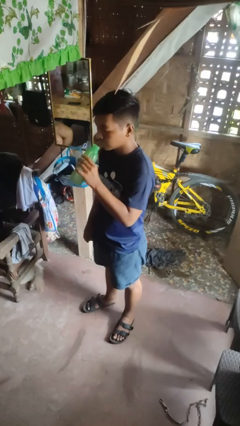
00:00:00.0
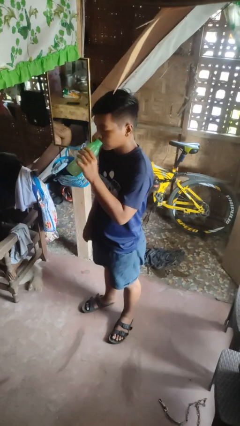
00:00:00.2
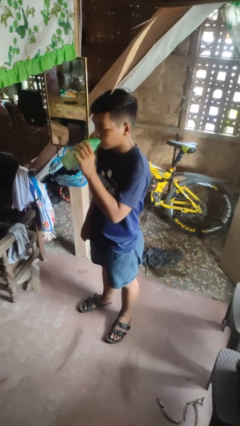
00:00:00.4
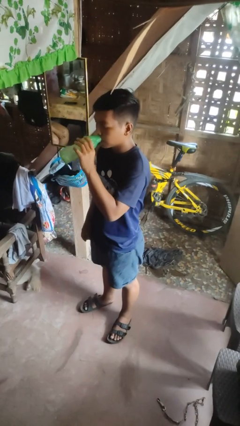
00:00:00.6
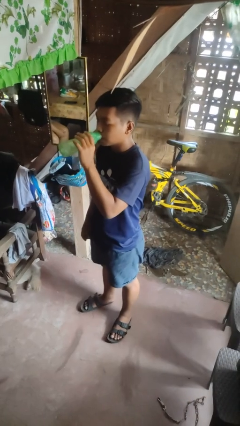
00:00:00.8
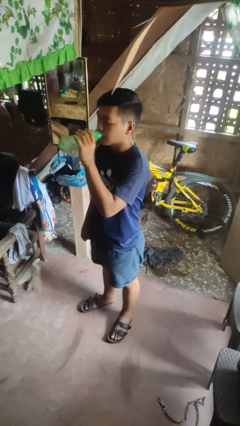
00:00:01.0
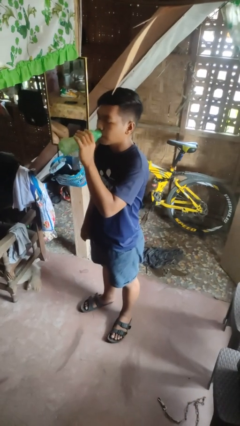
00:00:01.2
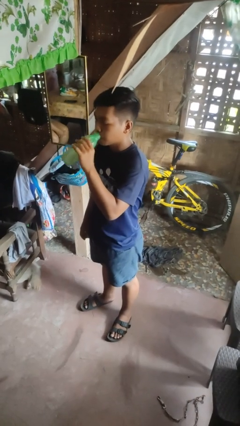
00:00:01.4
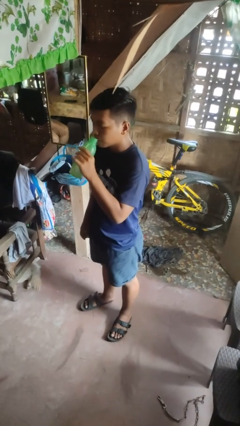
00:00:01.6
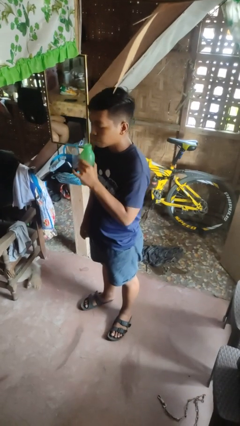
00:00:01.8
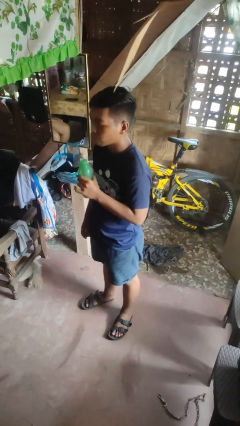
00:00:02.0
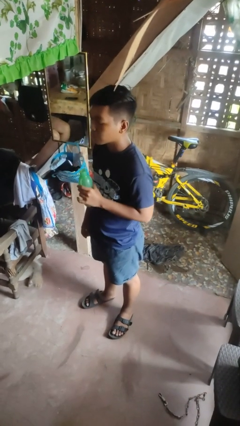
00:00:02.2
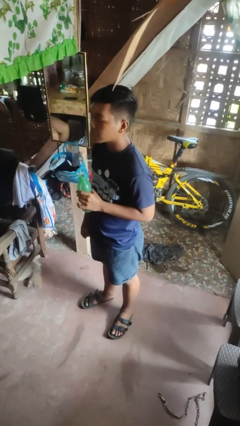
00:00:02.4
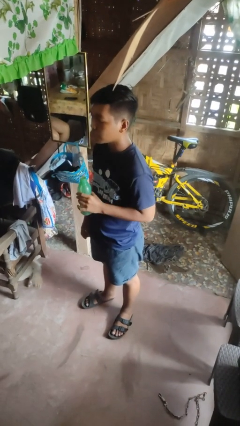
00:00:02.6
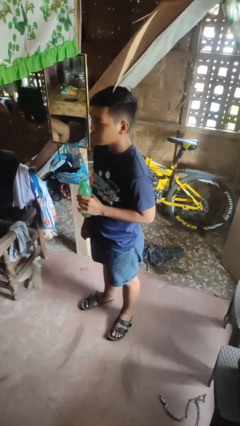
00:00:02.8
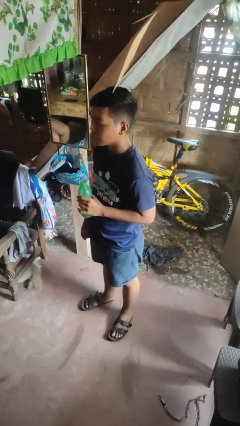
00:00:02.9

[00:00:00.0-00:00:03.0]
person drinks from bottle

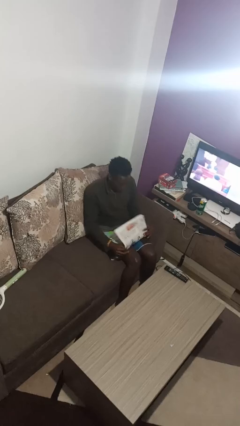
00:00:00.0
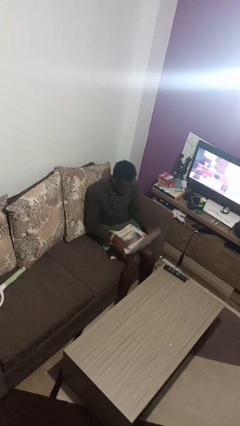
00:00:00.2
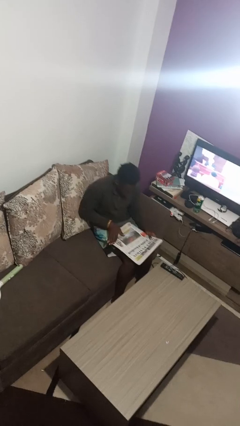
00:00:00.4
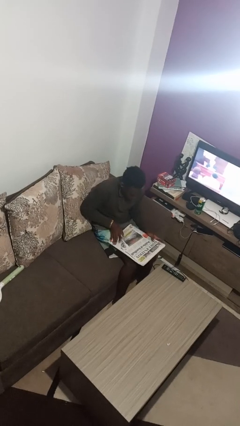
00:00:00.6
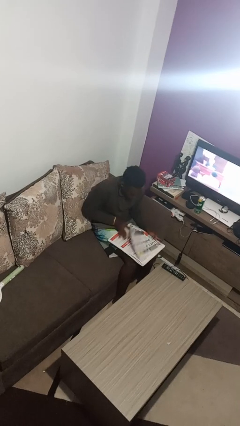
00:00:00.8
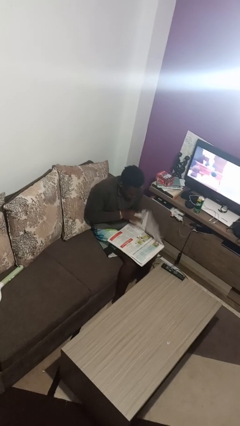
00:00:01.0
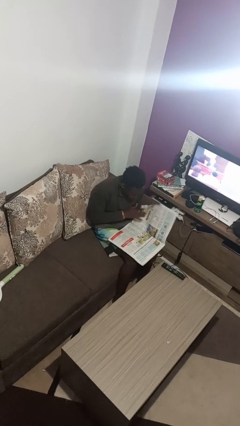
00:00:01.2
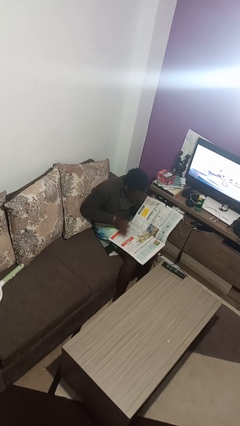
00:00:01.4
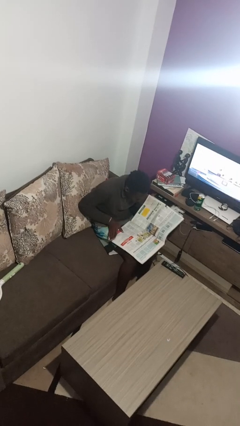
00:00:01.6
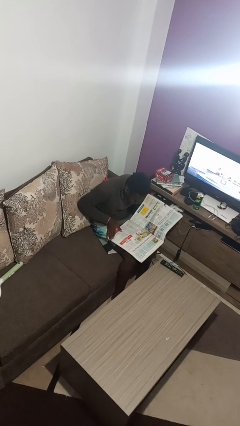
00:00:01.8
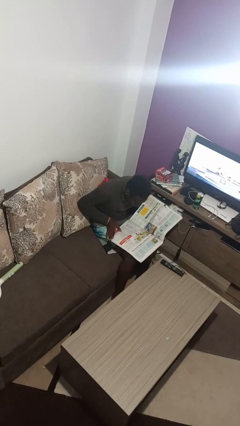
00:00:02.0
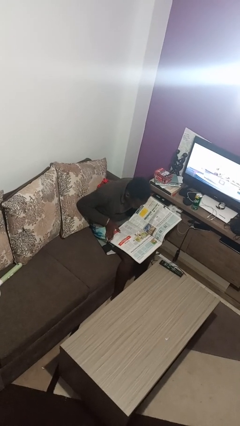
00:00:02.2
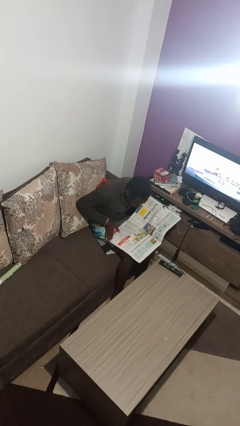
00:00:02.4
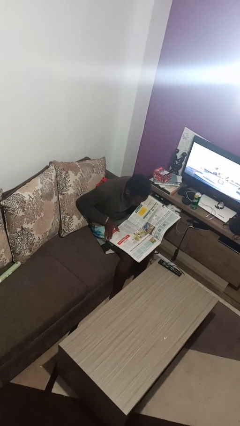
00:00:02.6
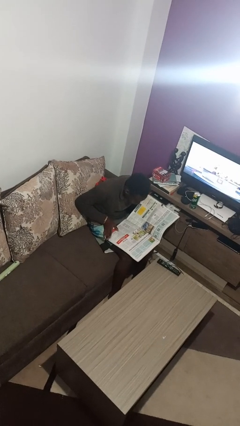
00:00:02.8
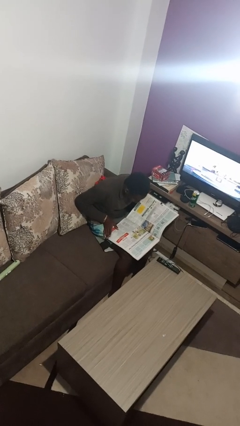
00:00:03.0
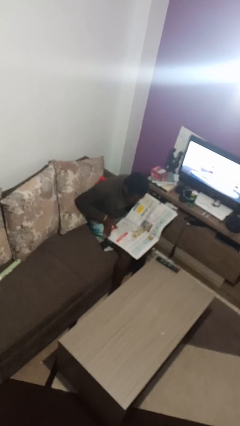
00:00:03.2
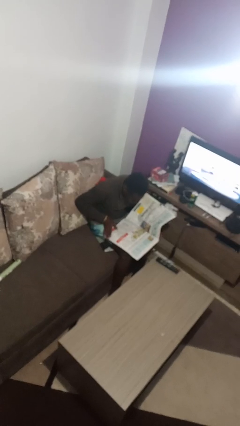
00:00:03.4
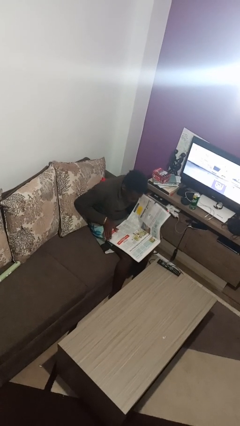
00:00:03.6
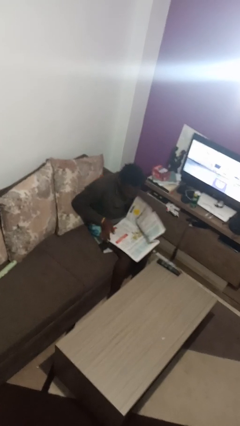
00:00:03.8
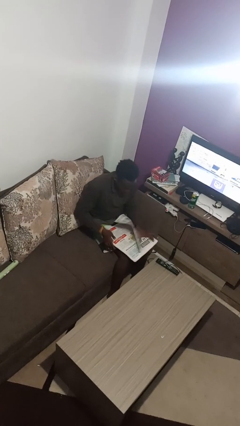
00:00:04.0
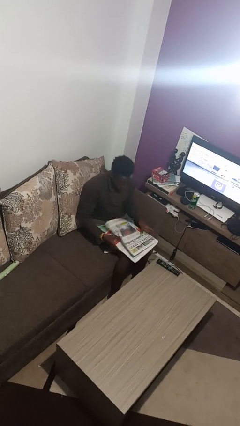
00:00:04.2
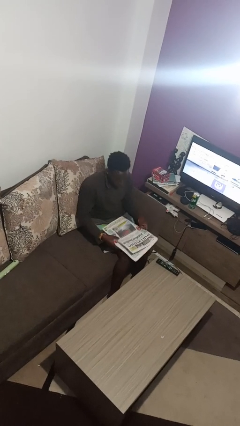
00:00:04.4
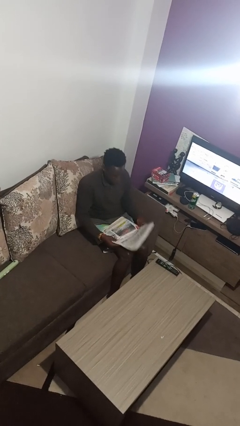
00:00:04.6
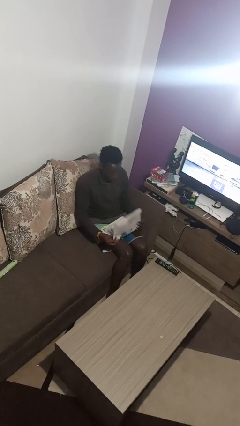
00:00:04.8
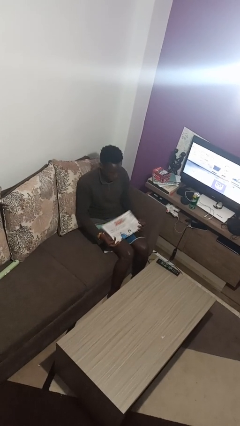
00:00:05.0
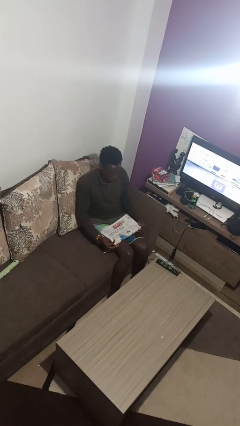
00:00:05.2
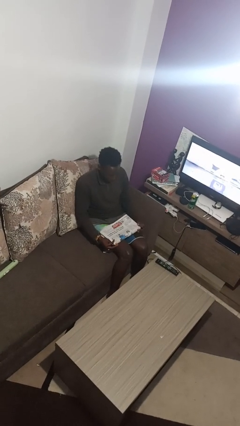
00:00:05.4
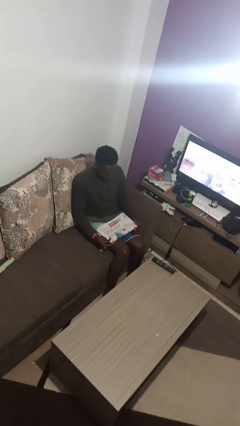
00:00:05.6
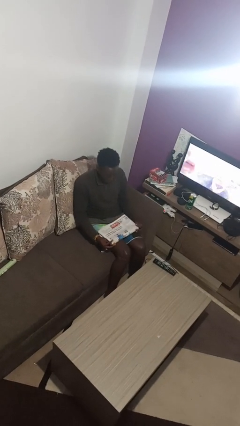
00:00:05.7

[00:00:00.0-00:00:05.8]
person reads newspaper

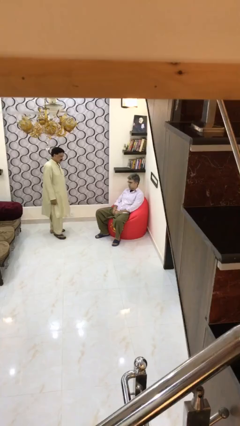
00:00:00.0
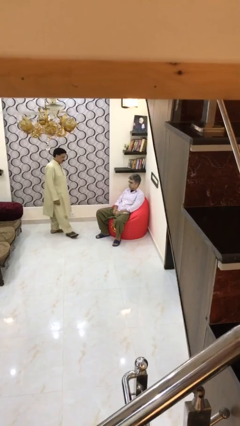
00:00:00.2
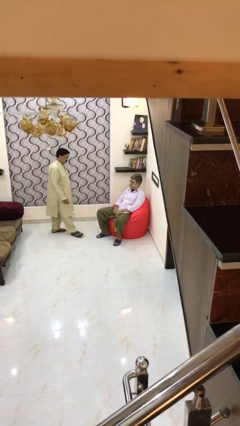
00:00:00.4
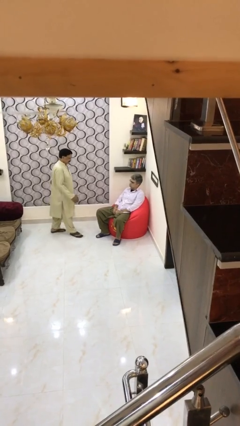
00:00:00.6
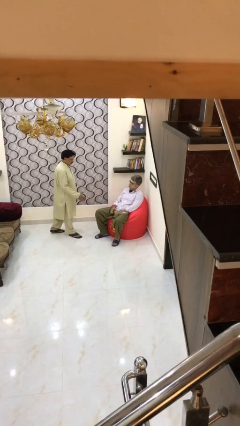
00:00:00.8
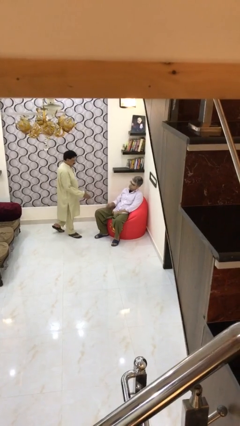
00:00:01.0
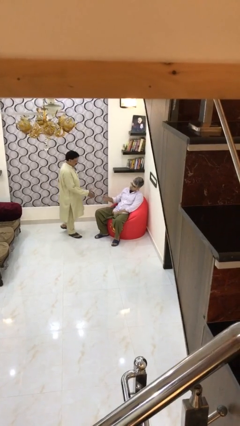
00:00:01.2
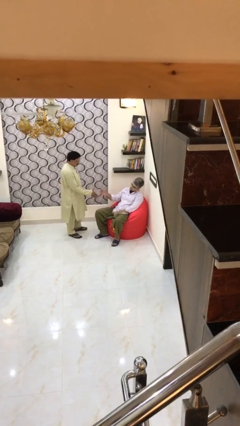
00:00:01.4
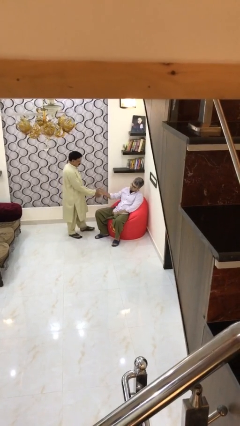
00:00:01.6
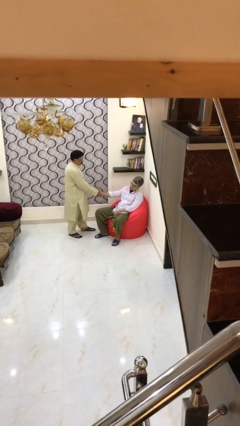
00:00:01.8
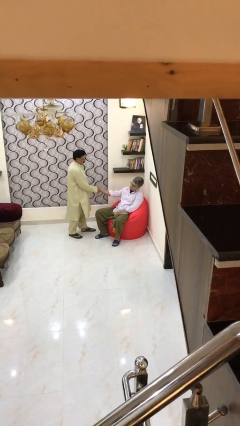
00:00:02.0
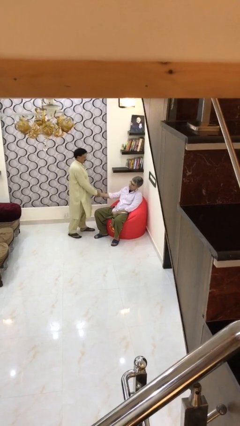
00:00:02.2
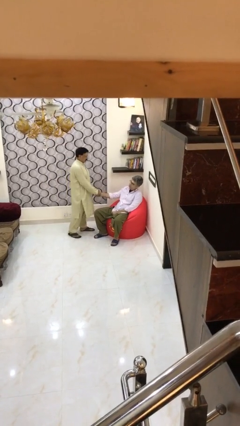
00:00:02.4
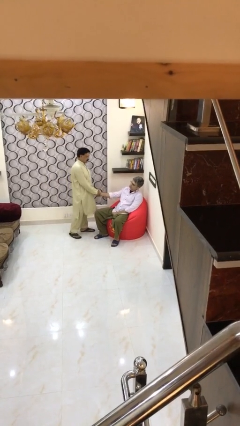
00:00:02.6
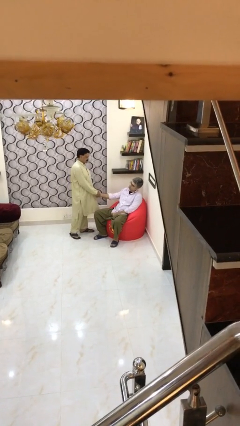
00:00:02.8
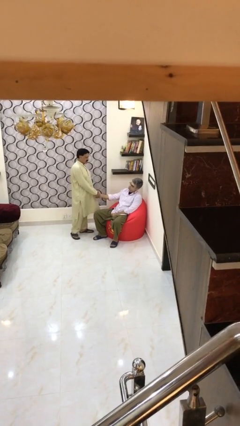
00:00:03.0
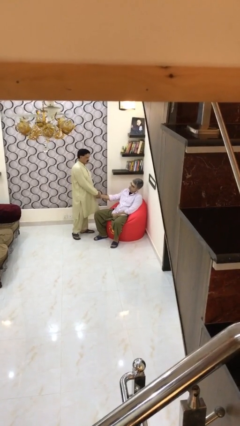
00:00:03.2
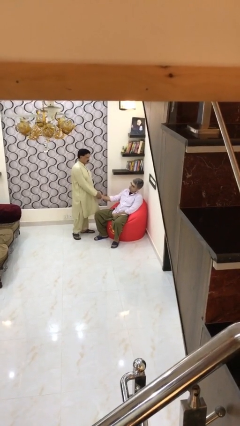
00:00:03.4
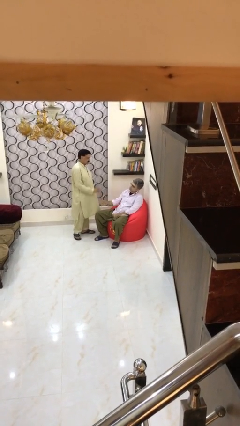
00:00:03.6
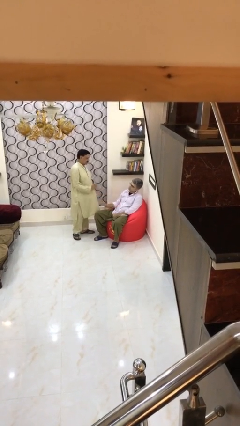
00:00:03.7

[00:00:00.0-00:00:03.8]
person shakes hand

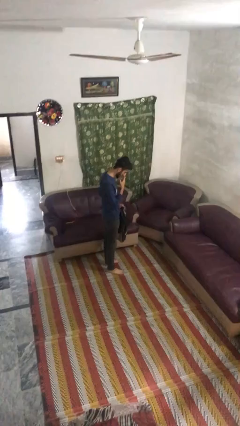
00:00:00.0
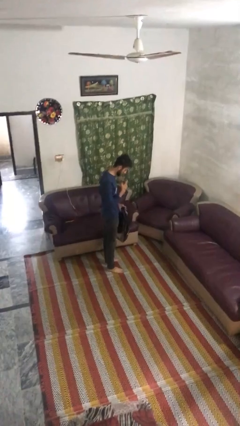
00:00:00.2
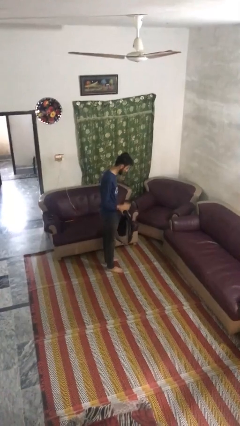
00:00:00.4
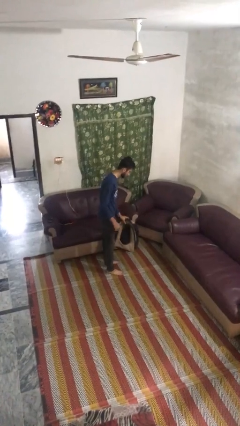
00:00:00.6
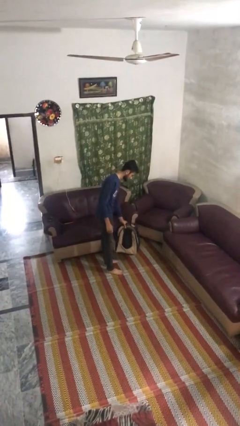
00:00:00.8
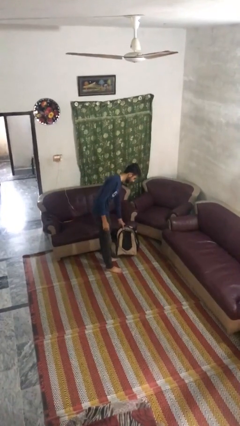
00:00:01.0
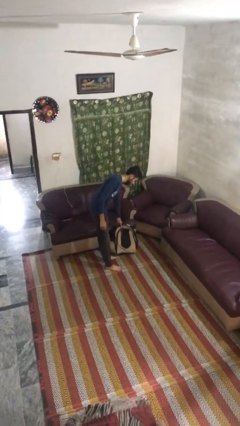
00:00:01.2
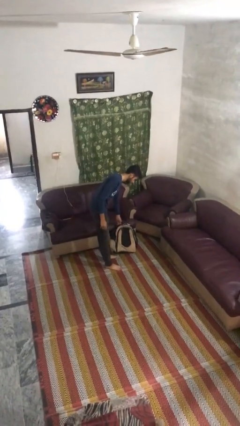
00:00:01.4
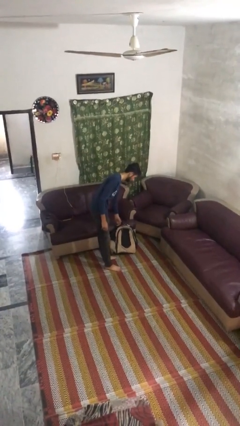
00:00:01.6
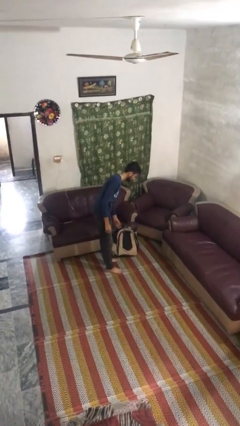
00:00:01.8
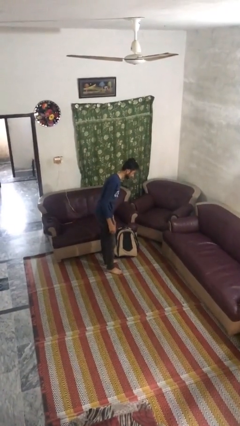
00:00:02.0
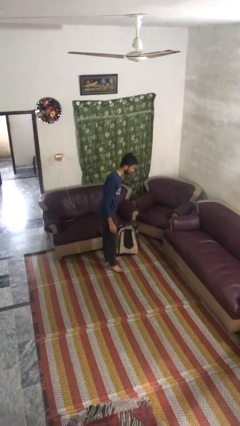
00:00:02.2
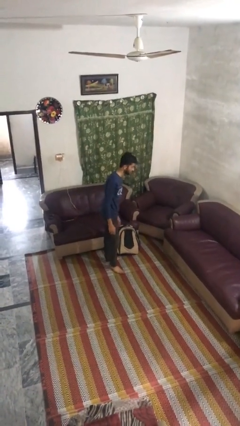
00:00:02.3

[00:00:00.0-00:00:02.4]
person puts down object on floor

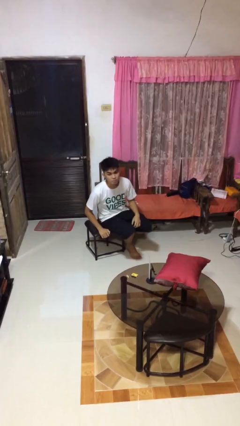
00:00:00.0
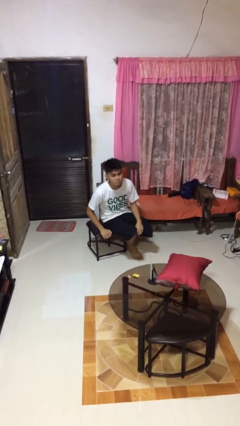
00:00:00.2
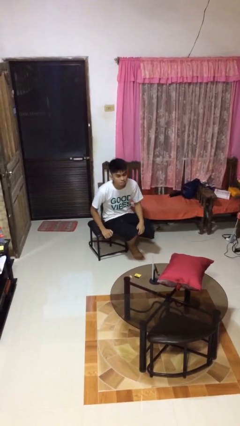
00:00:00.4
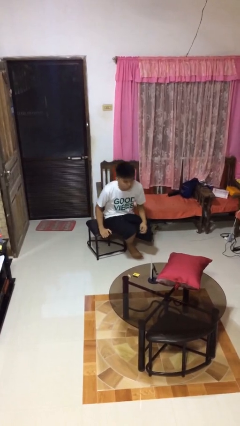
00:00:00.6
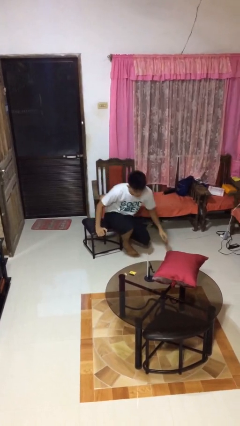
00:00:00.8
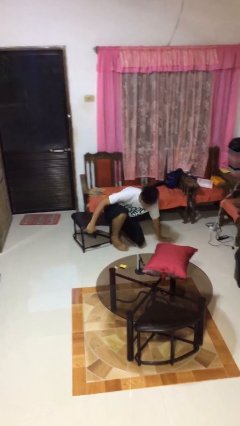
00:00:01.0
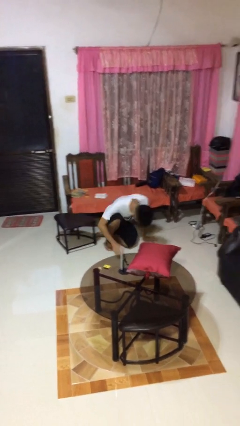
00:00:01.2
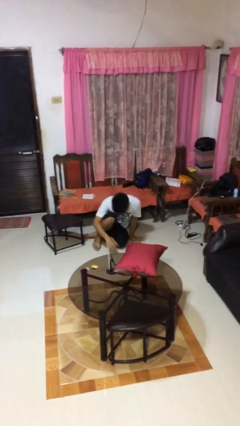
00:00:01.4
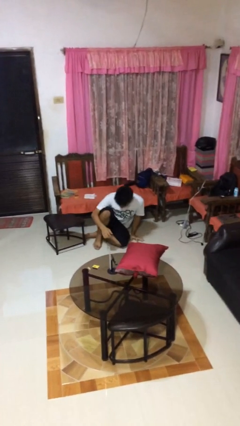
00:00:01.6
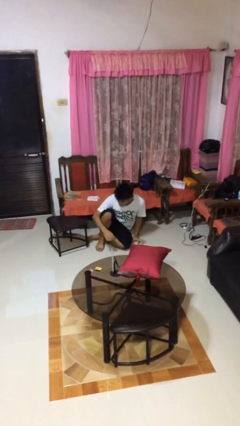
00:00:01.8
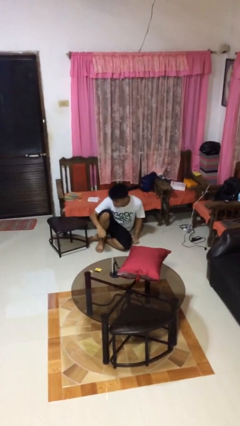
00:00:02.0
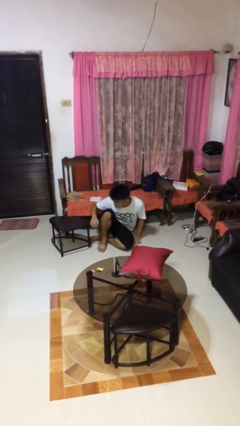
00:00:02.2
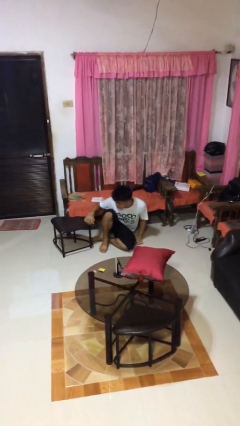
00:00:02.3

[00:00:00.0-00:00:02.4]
person falls from chair

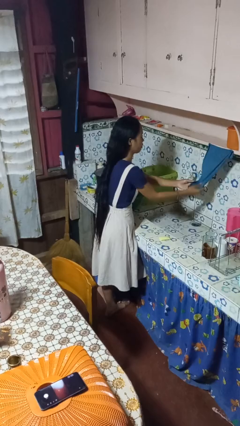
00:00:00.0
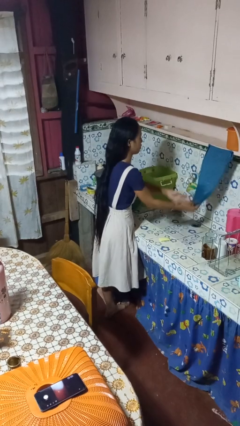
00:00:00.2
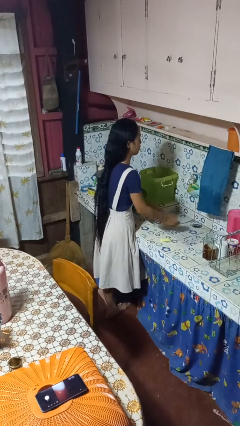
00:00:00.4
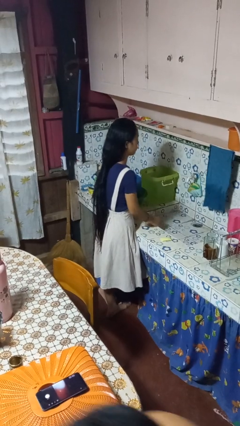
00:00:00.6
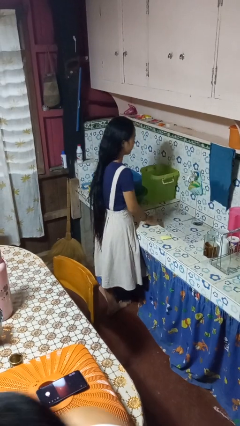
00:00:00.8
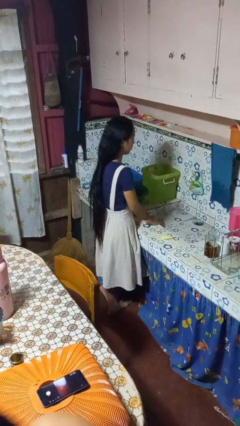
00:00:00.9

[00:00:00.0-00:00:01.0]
person dries hands with towel
